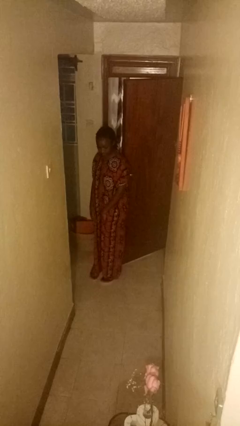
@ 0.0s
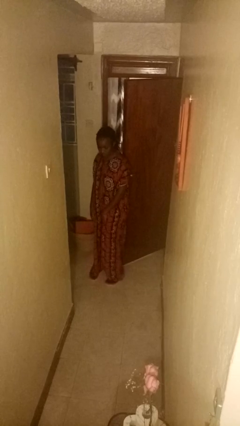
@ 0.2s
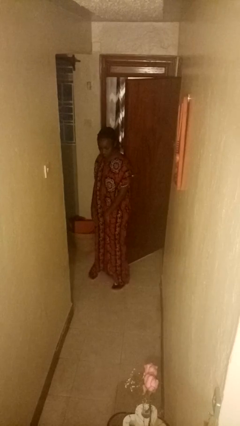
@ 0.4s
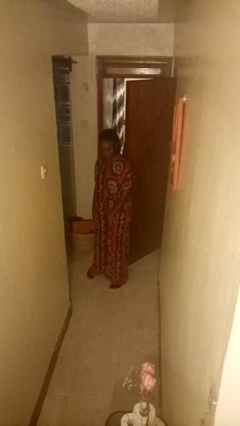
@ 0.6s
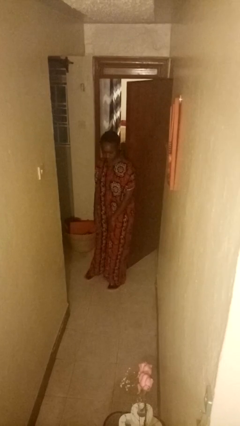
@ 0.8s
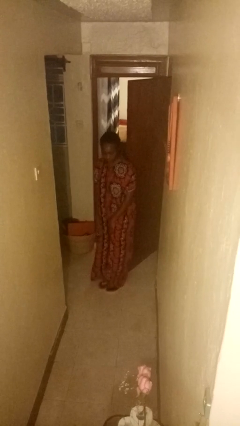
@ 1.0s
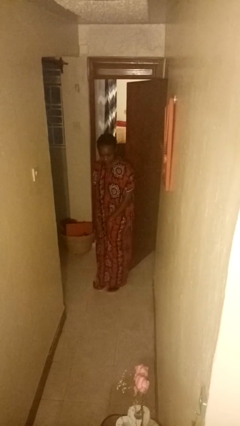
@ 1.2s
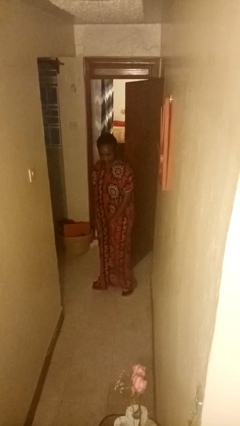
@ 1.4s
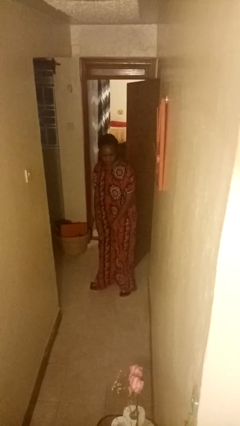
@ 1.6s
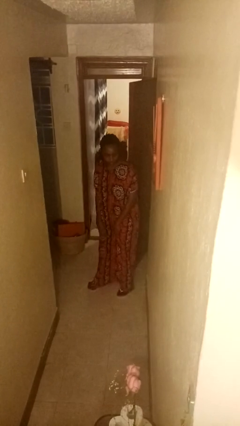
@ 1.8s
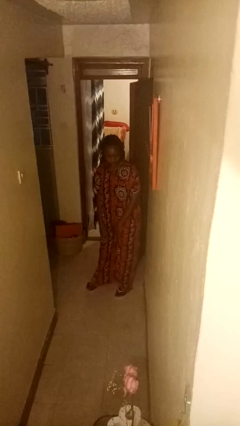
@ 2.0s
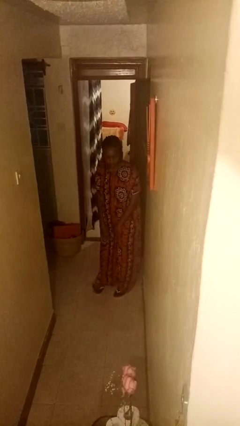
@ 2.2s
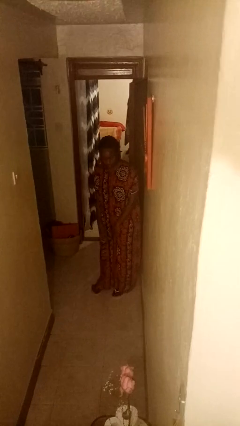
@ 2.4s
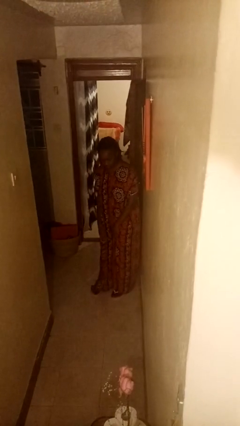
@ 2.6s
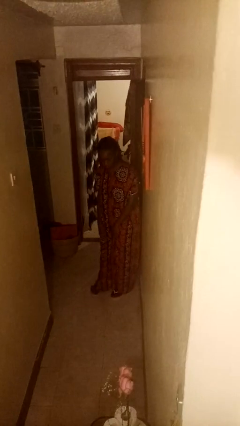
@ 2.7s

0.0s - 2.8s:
person closes door with hip

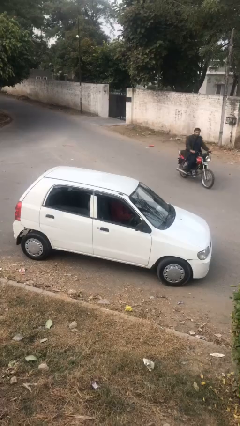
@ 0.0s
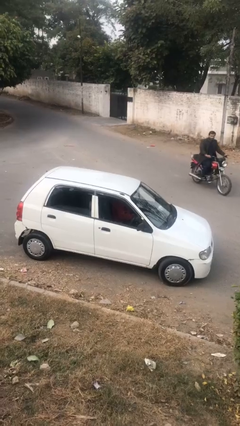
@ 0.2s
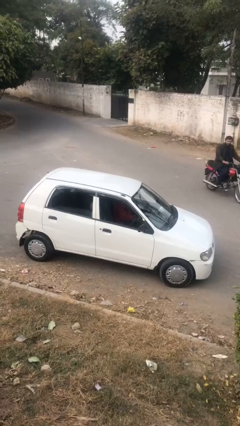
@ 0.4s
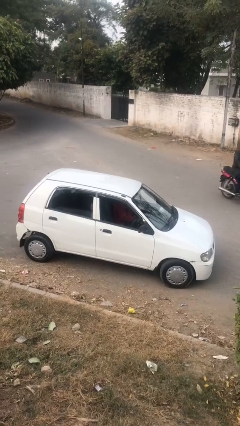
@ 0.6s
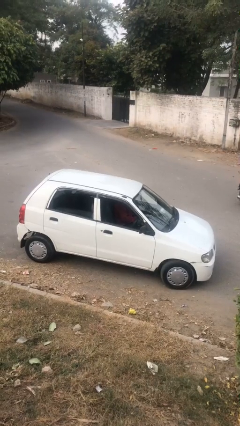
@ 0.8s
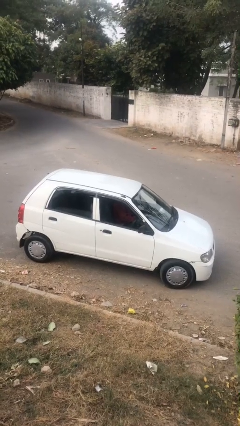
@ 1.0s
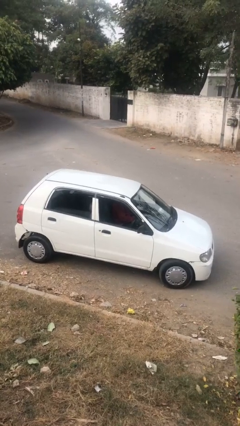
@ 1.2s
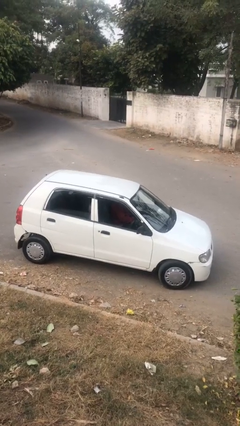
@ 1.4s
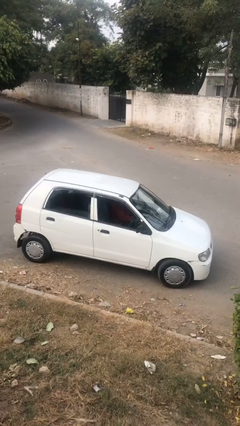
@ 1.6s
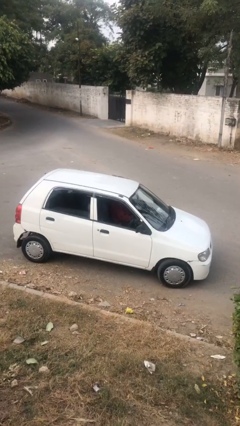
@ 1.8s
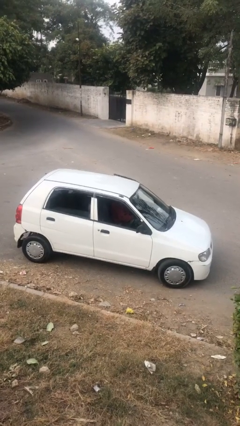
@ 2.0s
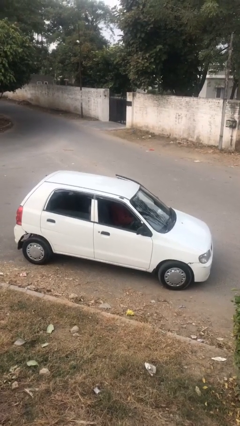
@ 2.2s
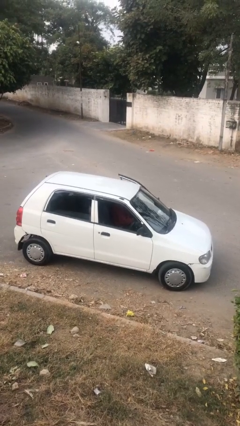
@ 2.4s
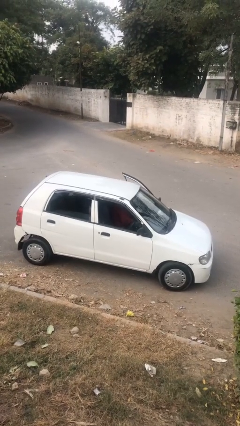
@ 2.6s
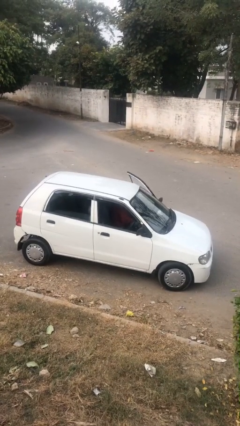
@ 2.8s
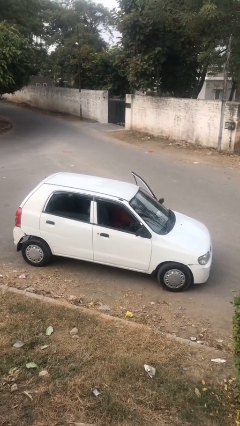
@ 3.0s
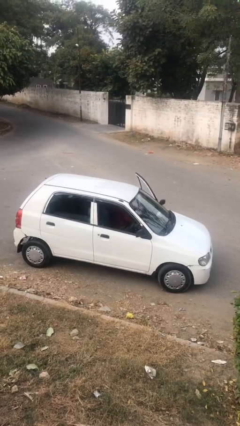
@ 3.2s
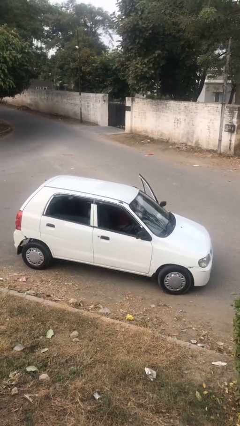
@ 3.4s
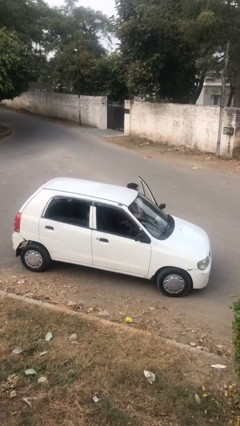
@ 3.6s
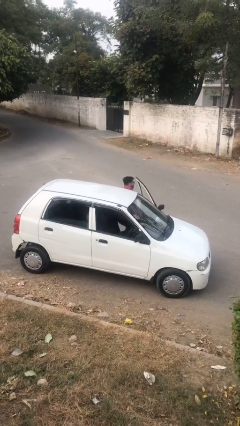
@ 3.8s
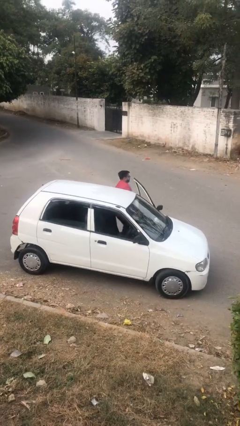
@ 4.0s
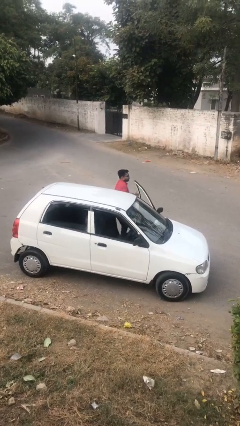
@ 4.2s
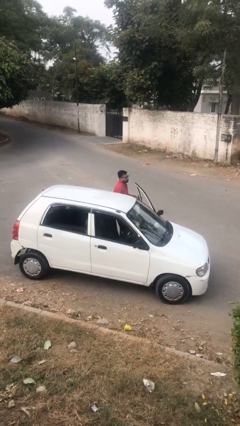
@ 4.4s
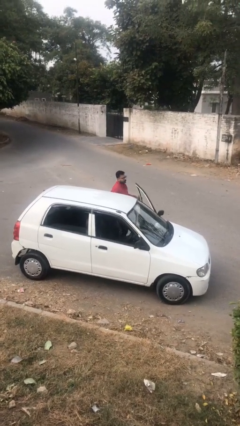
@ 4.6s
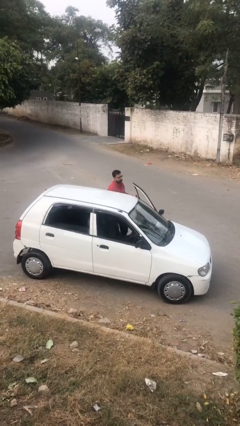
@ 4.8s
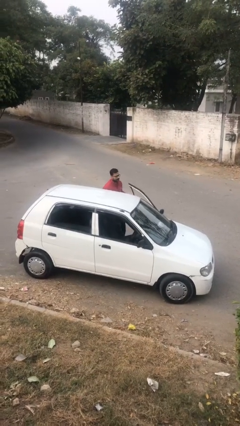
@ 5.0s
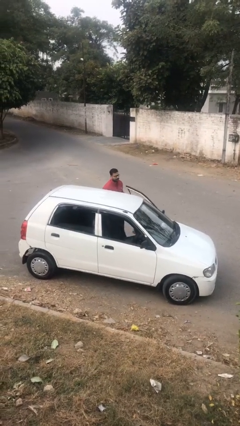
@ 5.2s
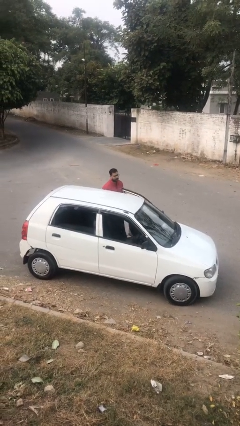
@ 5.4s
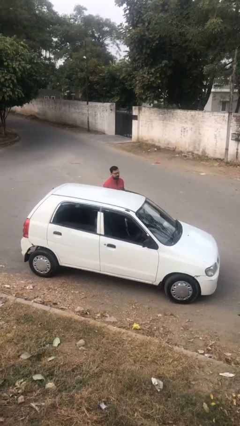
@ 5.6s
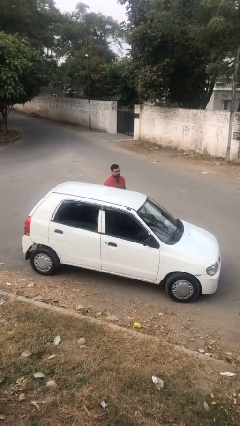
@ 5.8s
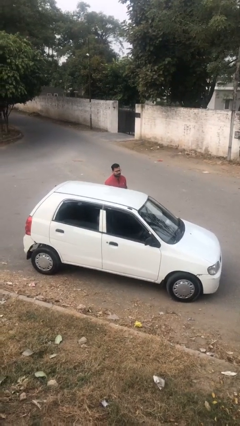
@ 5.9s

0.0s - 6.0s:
person exits car

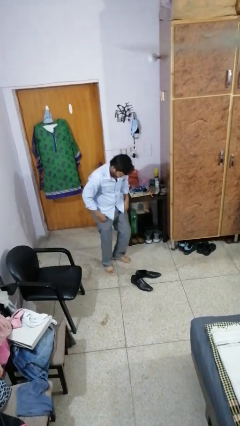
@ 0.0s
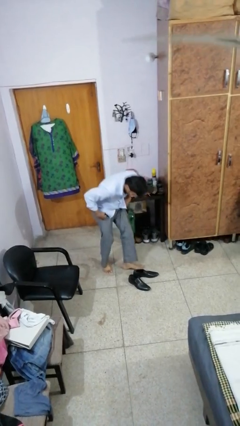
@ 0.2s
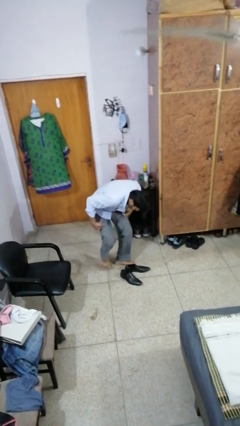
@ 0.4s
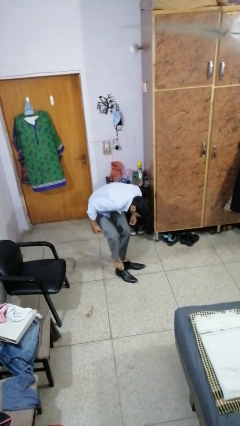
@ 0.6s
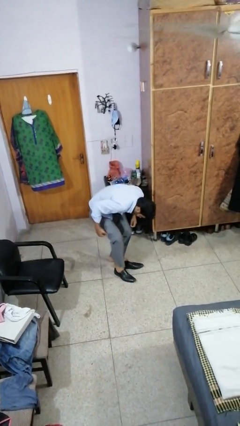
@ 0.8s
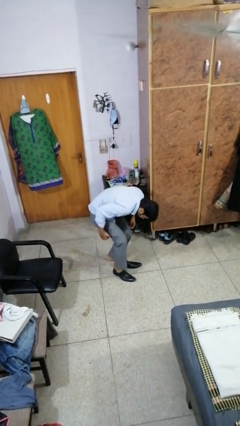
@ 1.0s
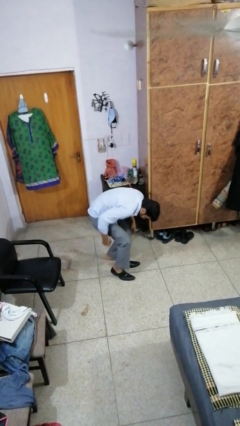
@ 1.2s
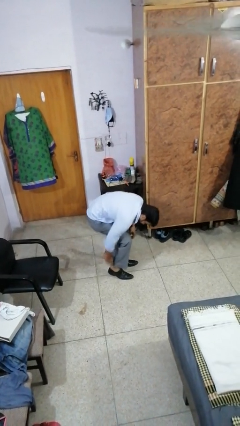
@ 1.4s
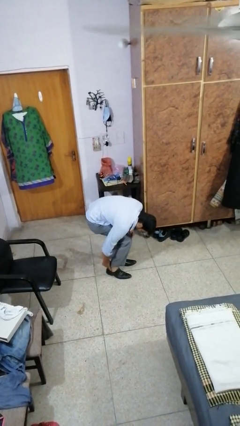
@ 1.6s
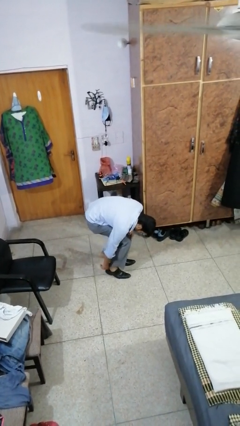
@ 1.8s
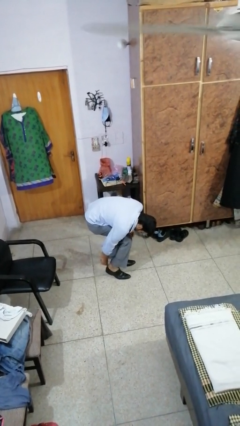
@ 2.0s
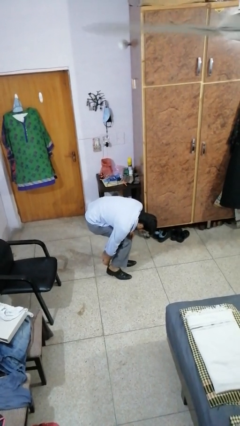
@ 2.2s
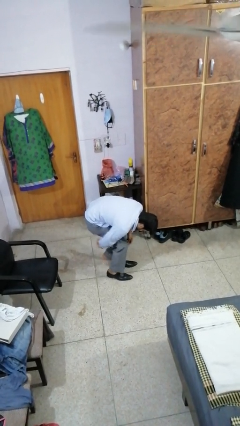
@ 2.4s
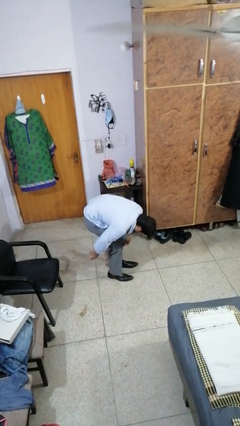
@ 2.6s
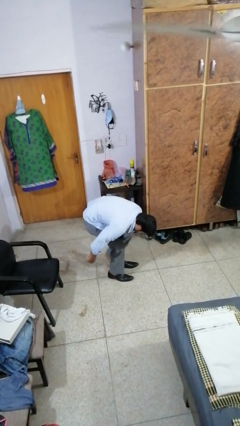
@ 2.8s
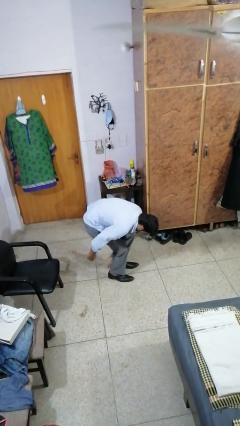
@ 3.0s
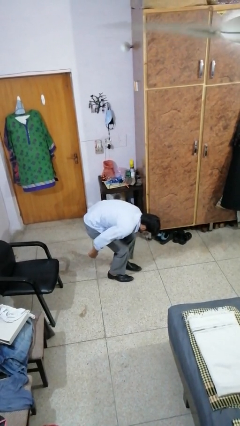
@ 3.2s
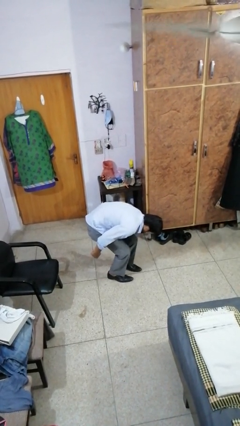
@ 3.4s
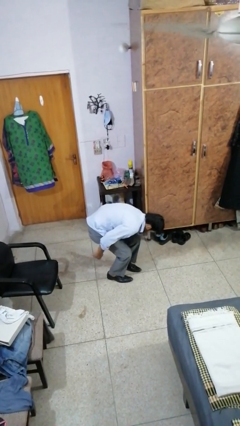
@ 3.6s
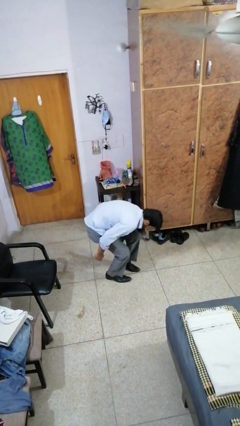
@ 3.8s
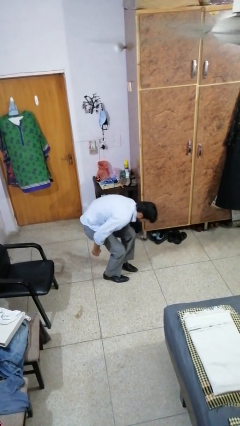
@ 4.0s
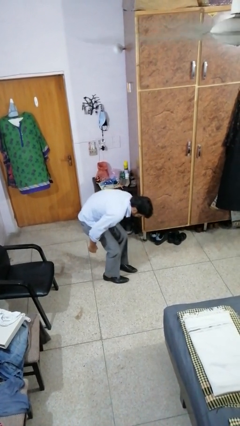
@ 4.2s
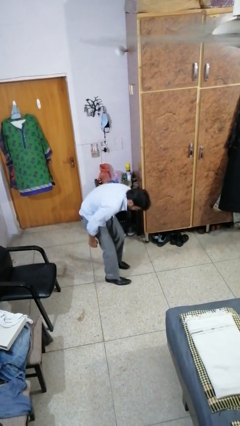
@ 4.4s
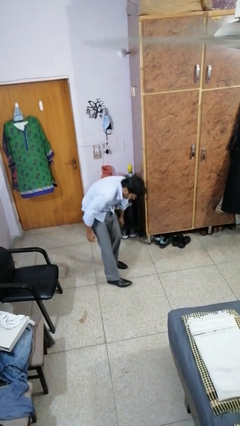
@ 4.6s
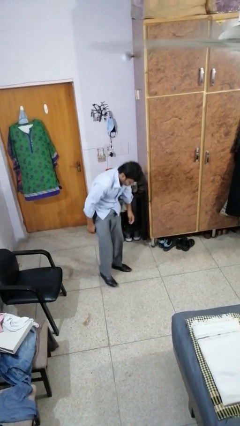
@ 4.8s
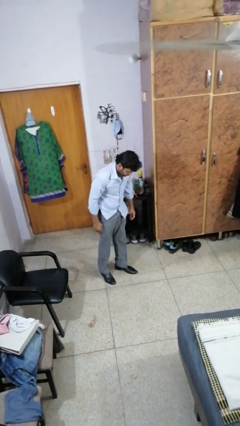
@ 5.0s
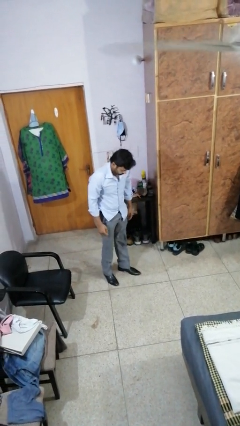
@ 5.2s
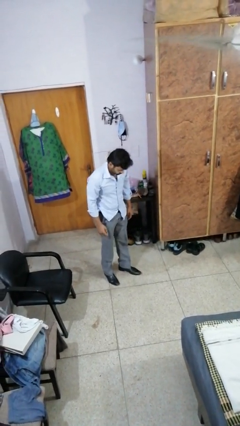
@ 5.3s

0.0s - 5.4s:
person puts on shoes

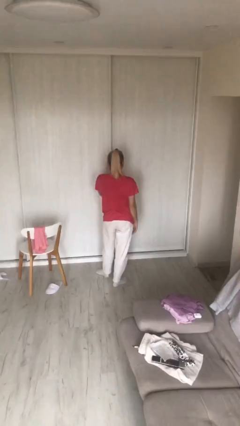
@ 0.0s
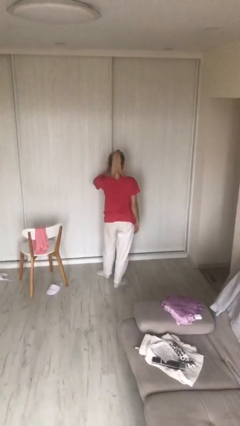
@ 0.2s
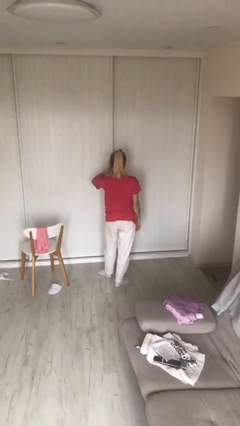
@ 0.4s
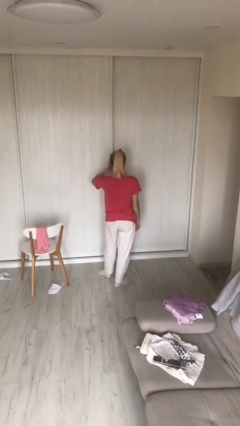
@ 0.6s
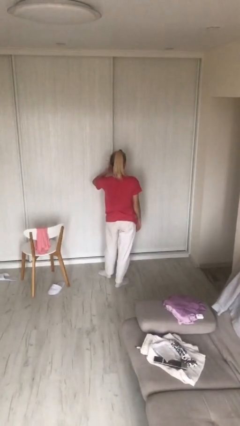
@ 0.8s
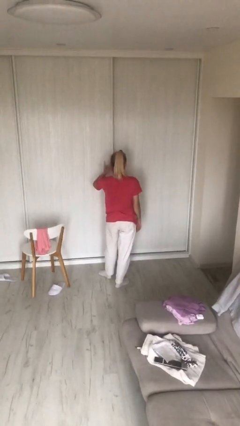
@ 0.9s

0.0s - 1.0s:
person gestures listen closely

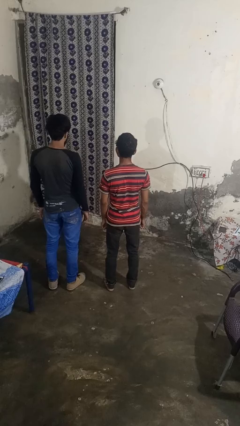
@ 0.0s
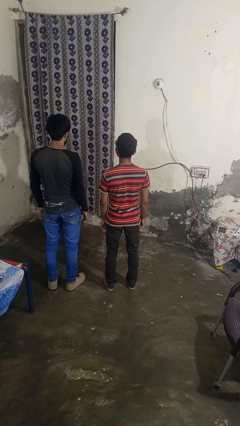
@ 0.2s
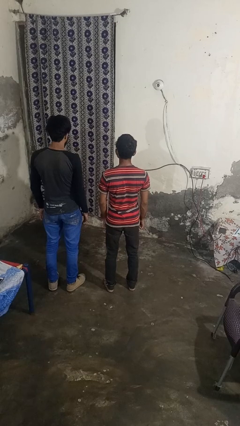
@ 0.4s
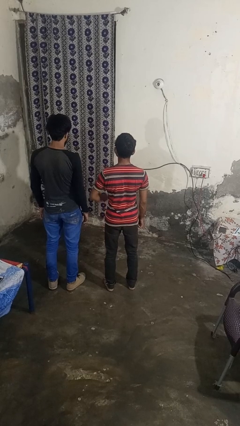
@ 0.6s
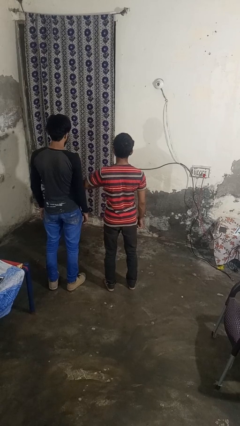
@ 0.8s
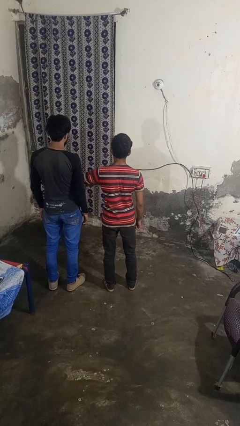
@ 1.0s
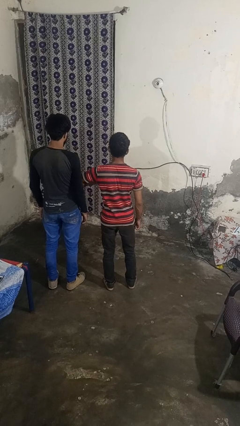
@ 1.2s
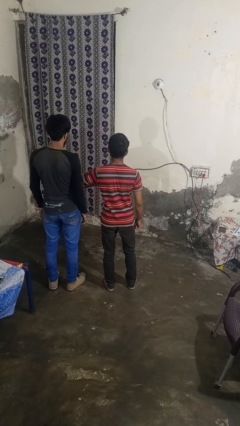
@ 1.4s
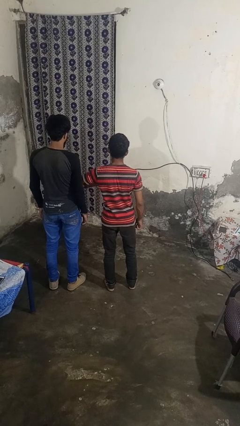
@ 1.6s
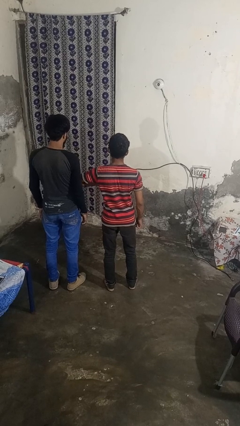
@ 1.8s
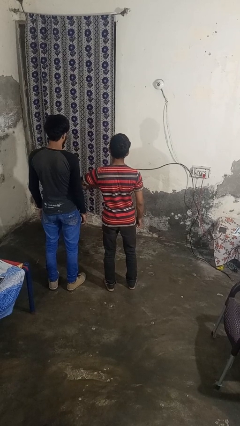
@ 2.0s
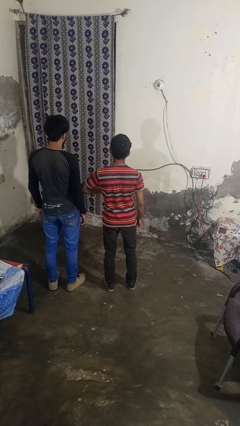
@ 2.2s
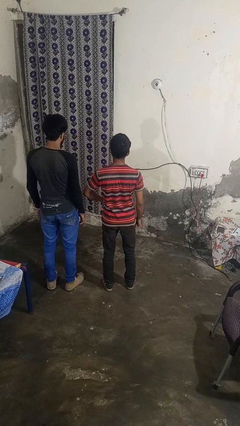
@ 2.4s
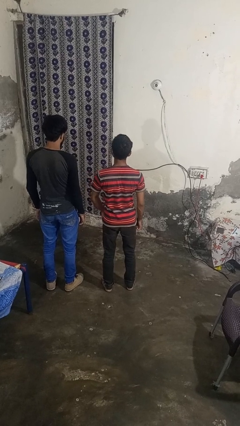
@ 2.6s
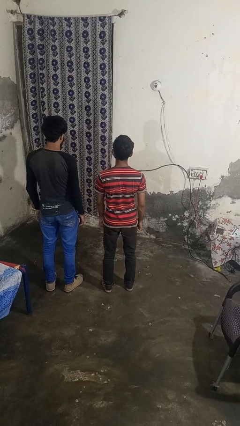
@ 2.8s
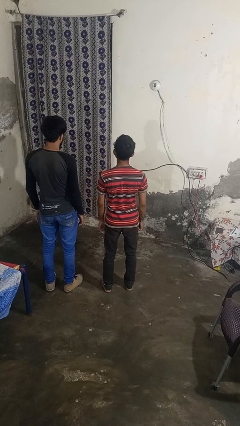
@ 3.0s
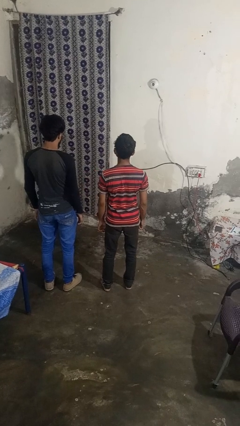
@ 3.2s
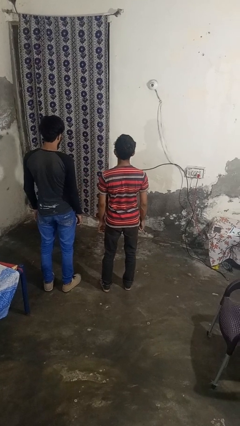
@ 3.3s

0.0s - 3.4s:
person nudges person with elbow
